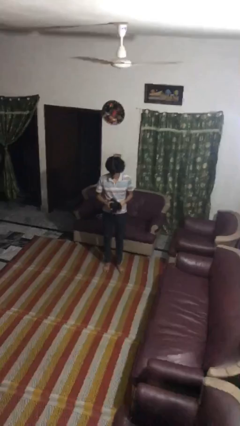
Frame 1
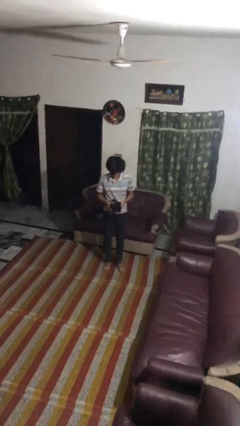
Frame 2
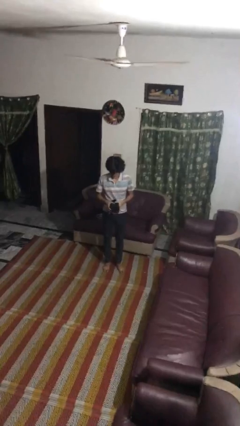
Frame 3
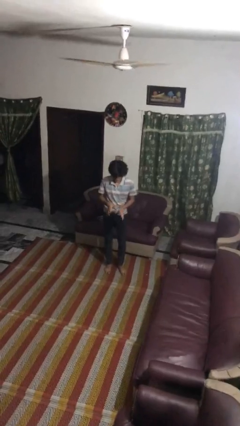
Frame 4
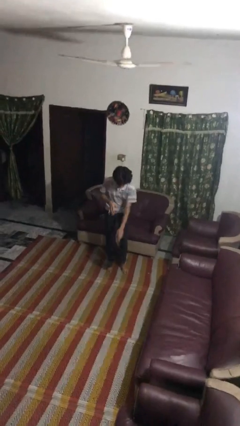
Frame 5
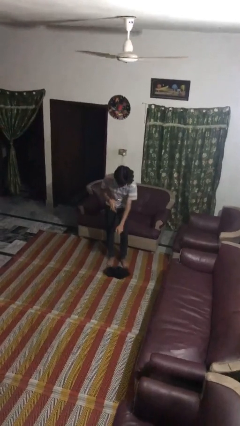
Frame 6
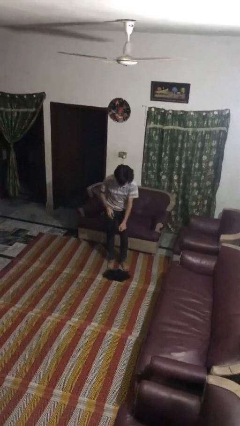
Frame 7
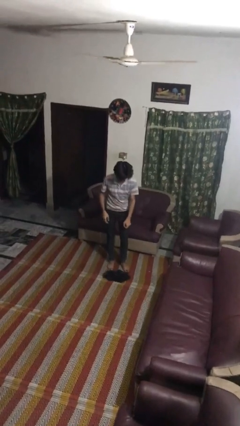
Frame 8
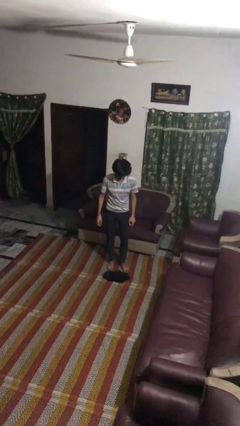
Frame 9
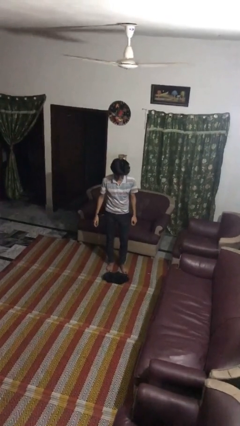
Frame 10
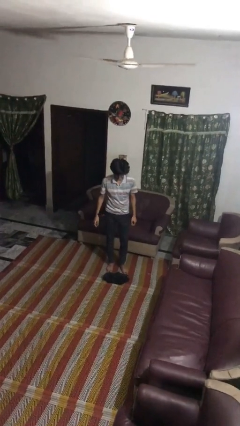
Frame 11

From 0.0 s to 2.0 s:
person drops object

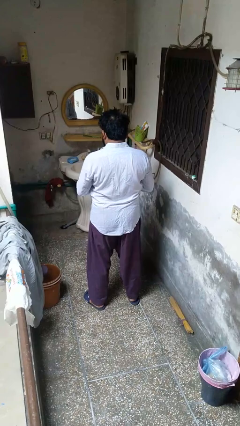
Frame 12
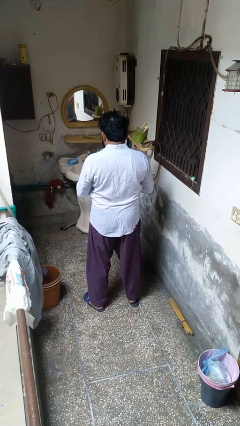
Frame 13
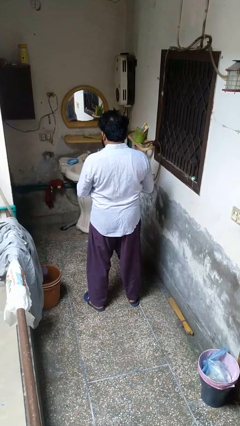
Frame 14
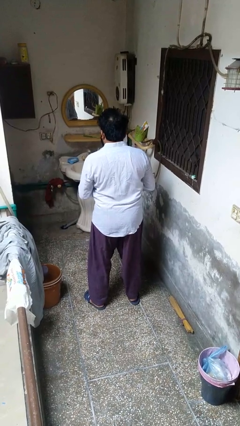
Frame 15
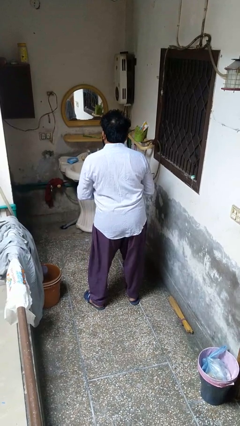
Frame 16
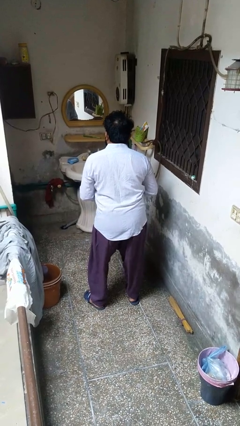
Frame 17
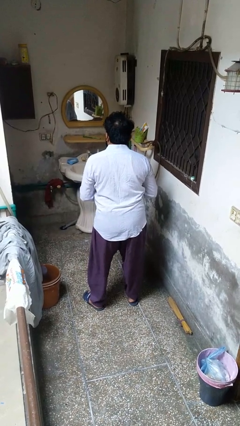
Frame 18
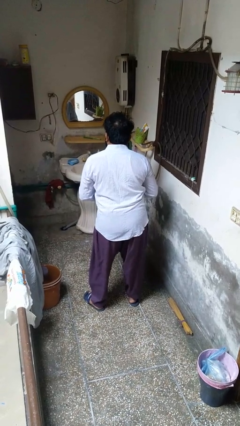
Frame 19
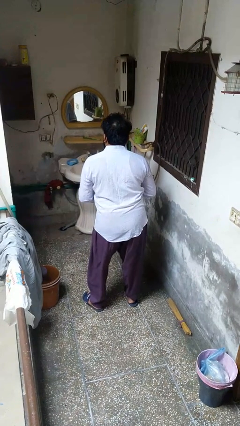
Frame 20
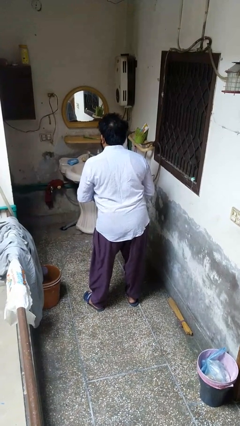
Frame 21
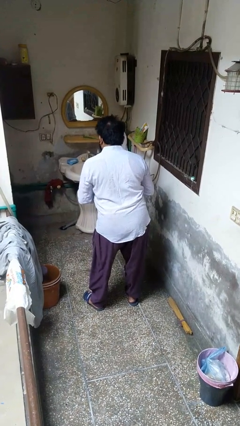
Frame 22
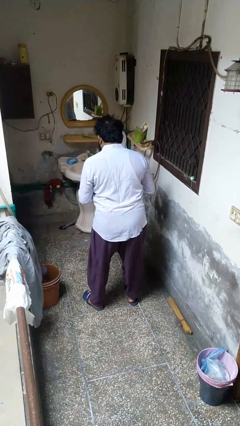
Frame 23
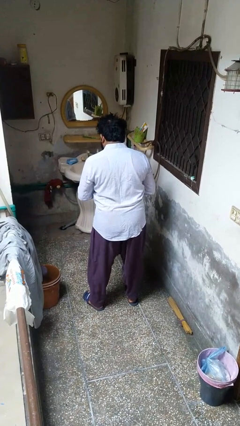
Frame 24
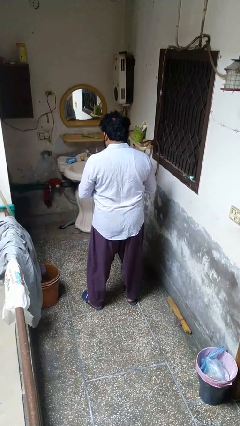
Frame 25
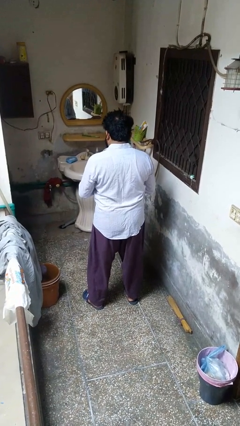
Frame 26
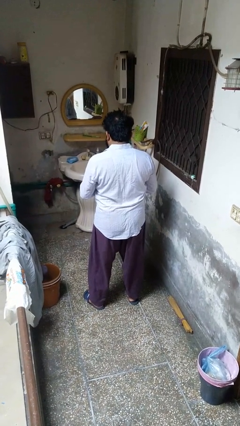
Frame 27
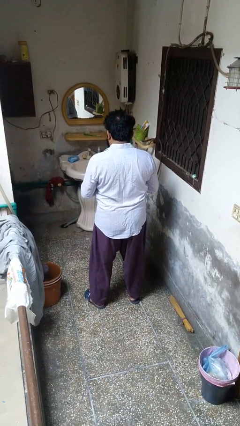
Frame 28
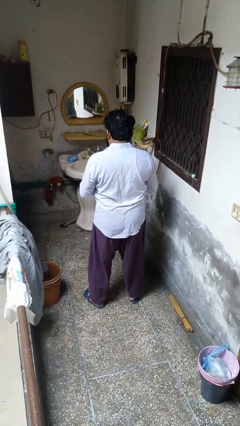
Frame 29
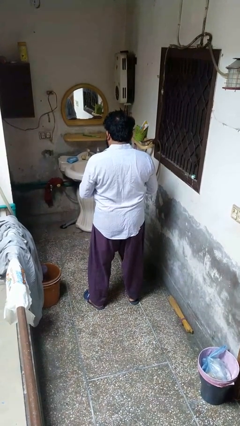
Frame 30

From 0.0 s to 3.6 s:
person wiggles hips

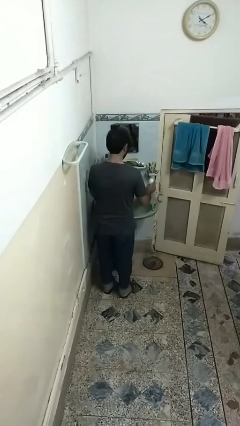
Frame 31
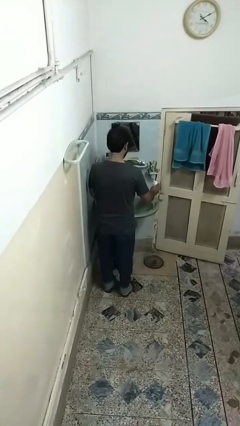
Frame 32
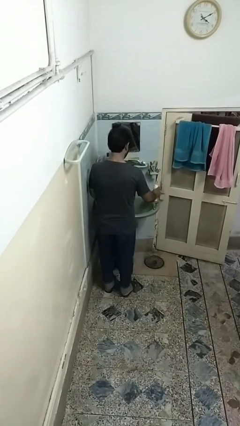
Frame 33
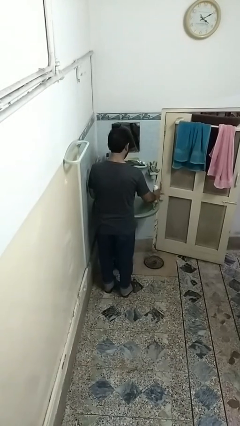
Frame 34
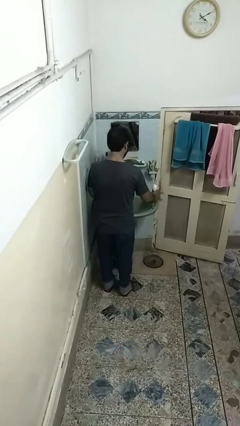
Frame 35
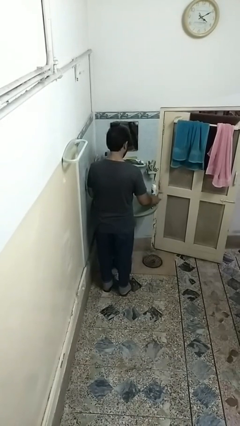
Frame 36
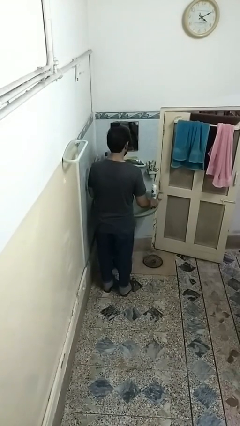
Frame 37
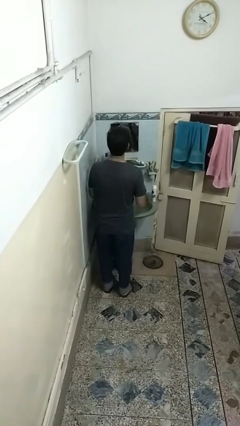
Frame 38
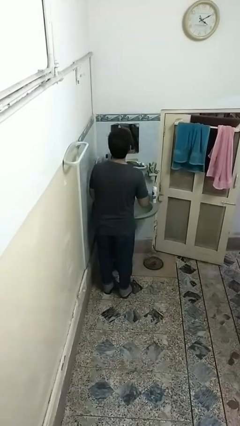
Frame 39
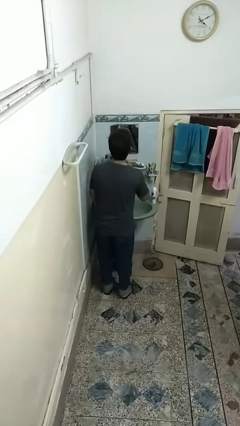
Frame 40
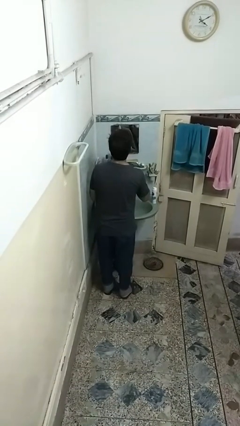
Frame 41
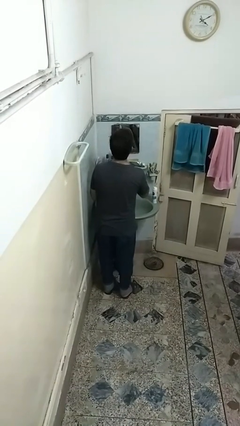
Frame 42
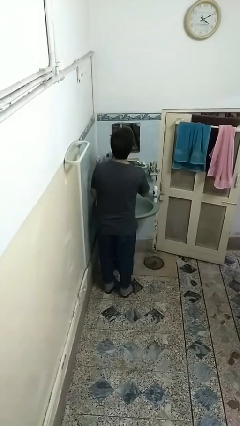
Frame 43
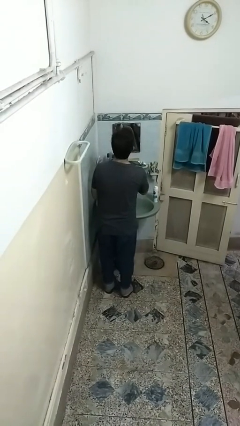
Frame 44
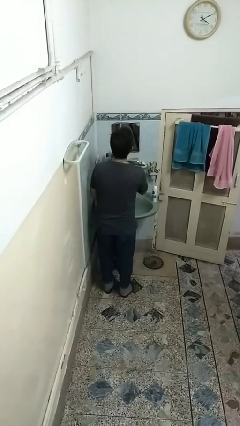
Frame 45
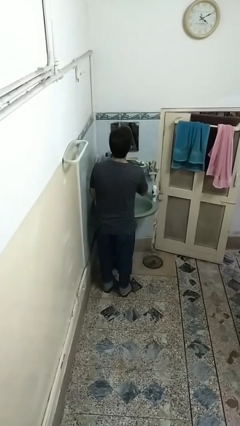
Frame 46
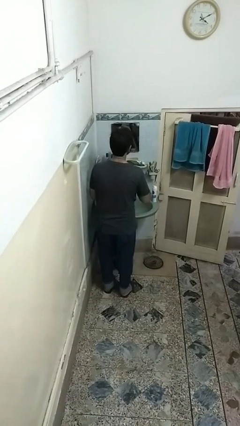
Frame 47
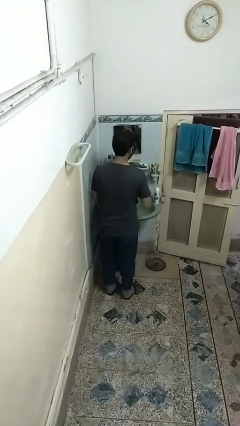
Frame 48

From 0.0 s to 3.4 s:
person shaves face

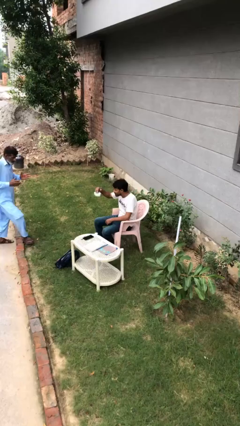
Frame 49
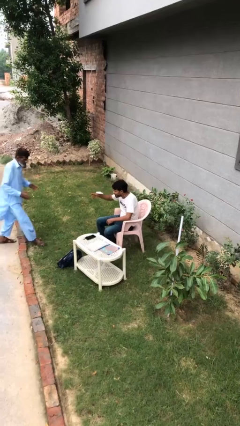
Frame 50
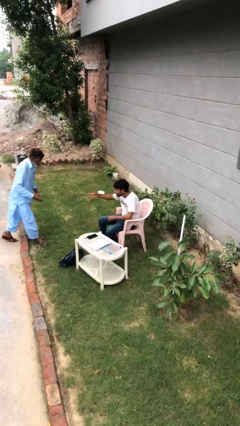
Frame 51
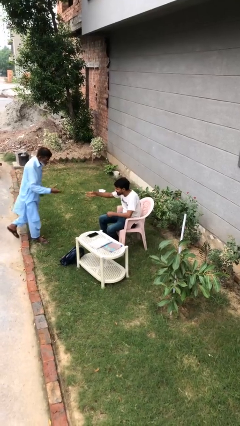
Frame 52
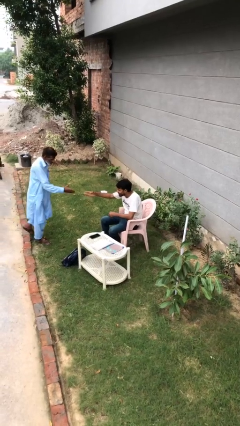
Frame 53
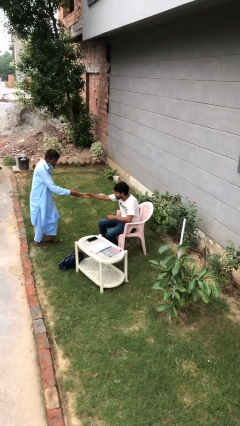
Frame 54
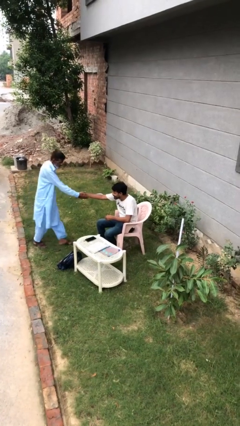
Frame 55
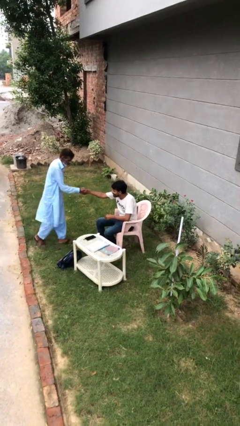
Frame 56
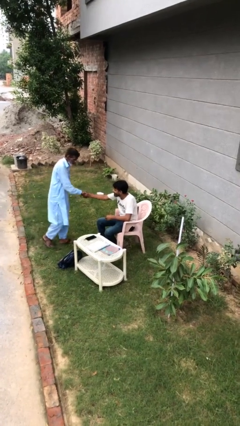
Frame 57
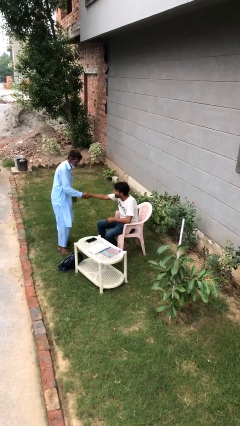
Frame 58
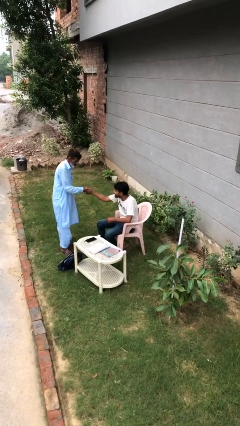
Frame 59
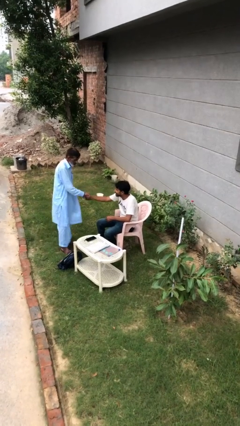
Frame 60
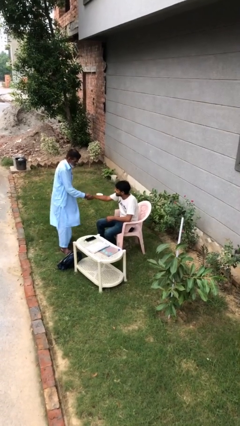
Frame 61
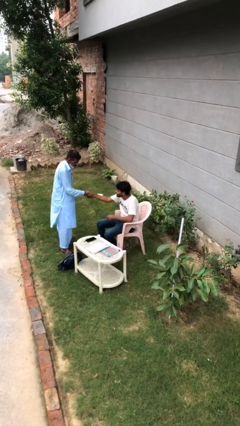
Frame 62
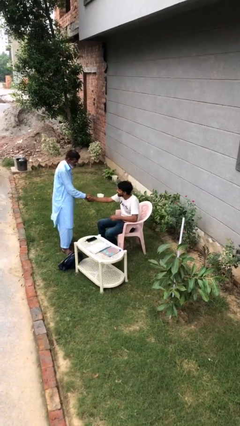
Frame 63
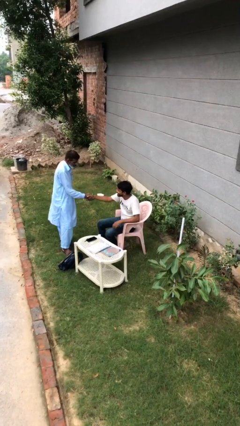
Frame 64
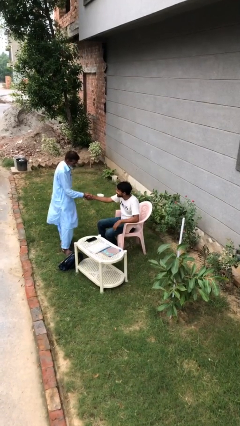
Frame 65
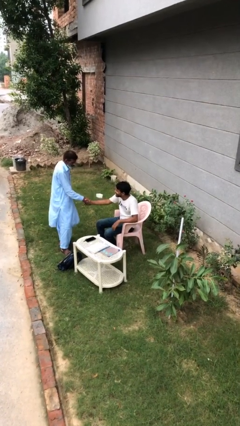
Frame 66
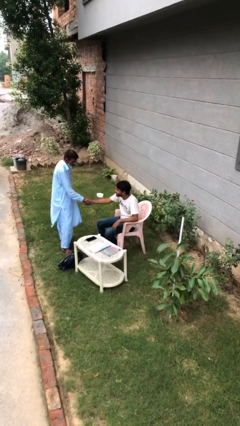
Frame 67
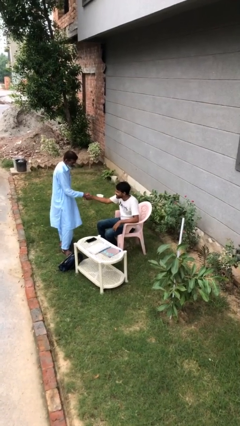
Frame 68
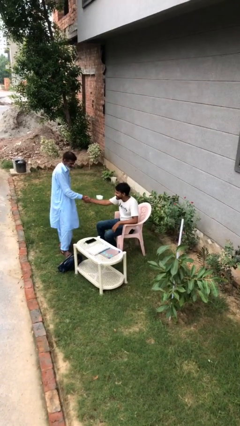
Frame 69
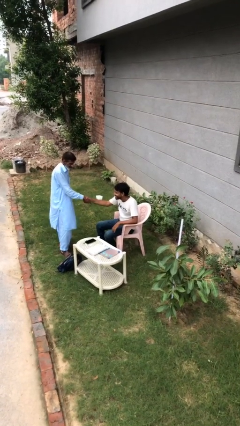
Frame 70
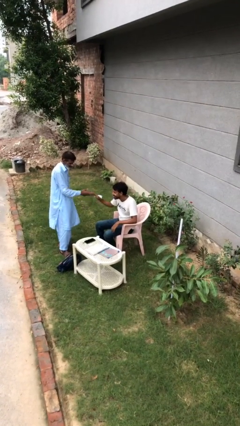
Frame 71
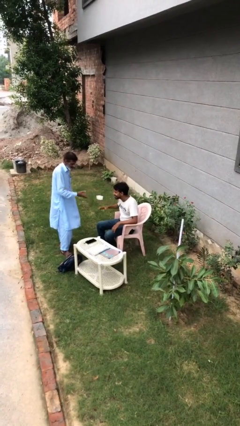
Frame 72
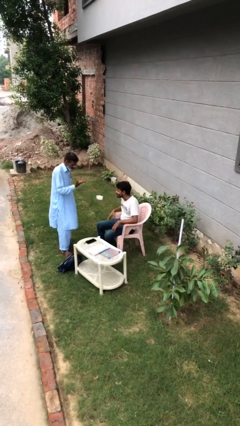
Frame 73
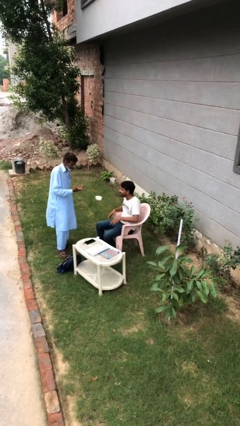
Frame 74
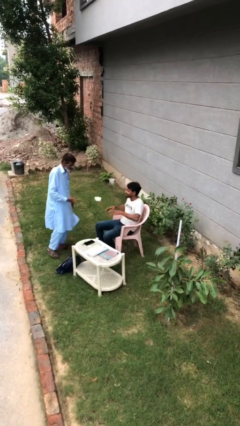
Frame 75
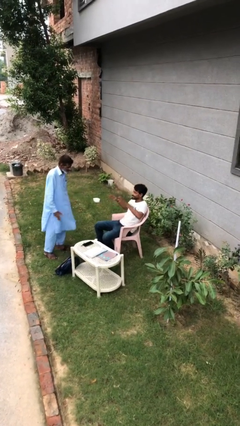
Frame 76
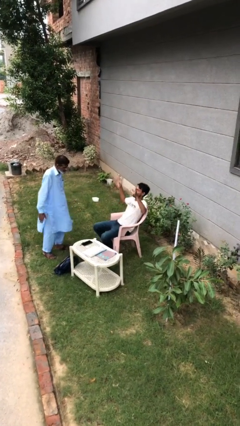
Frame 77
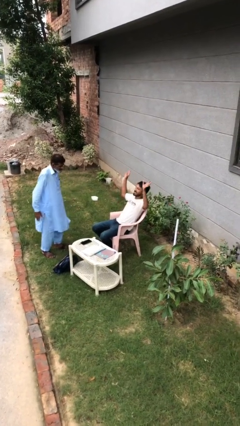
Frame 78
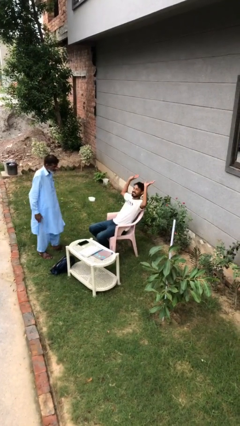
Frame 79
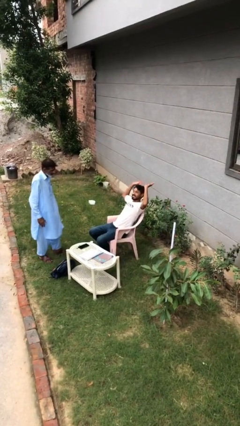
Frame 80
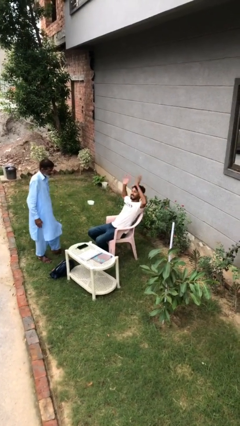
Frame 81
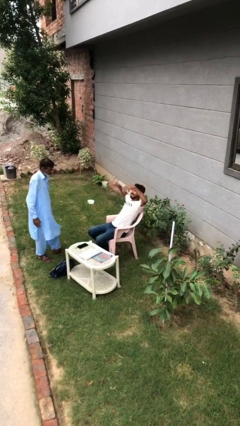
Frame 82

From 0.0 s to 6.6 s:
person shakes hand

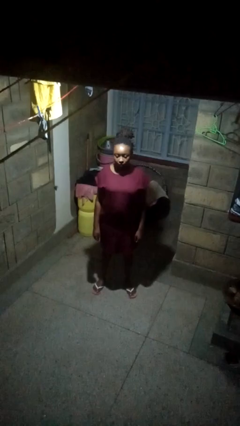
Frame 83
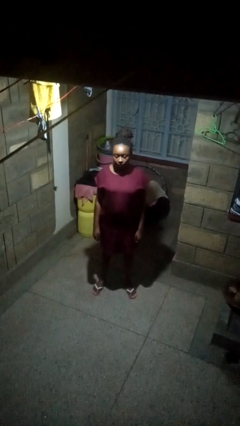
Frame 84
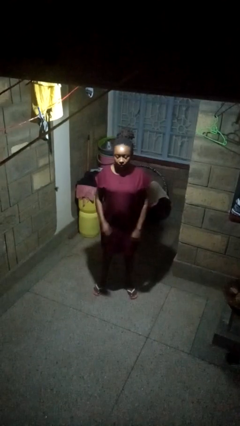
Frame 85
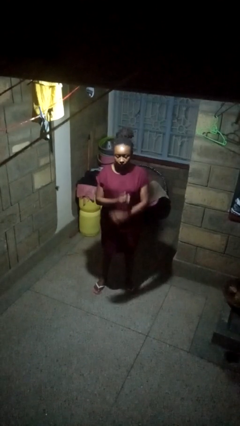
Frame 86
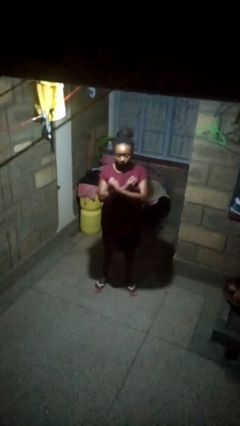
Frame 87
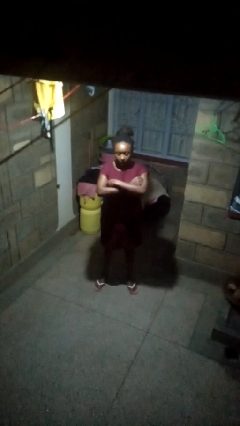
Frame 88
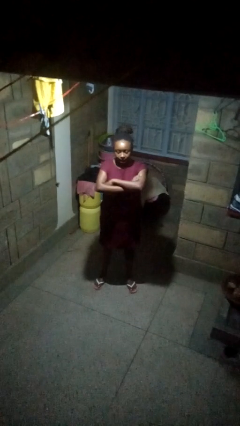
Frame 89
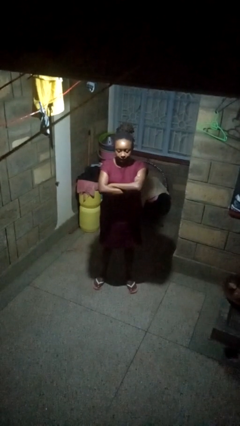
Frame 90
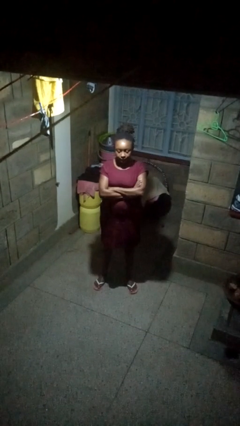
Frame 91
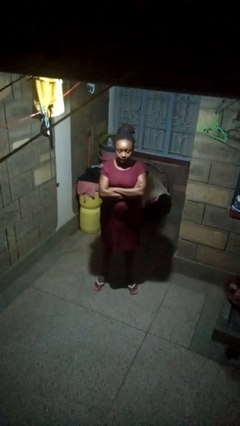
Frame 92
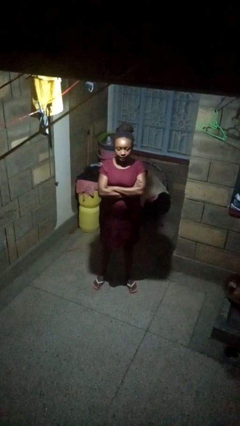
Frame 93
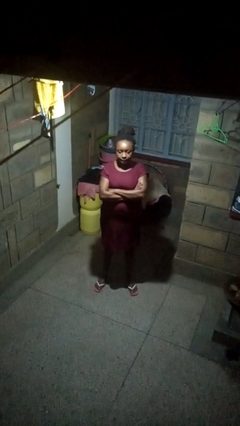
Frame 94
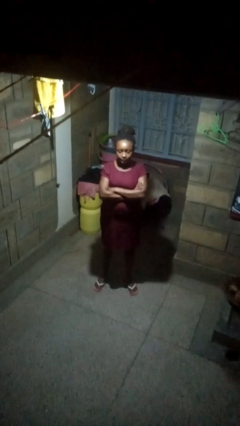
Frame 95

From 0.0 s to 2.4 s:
person crosses arms
